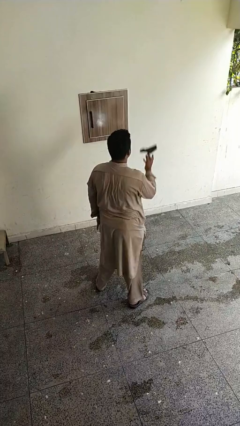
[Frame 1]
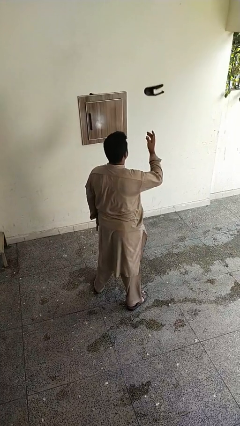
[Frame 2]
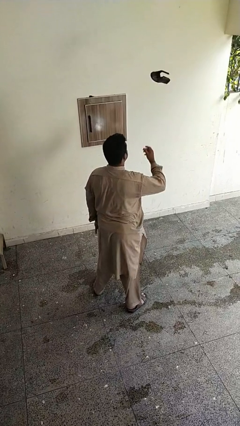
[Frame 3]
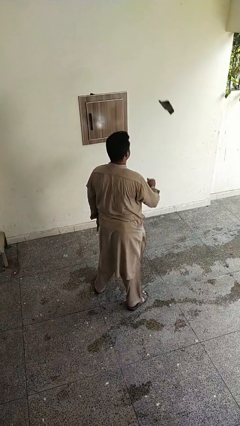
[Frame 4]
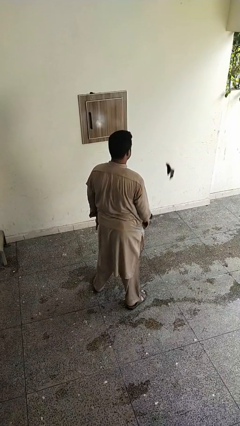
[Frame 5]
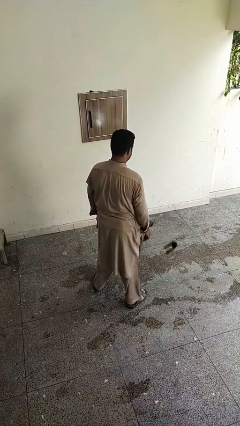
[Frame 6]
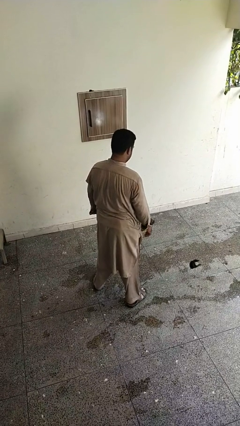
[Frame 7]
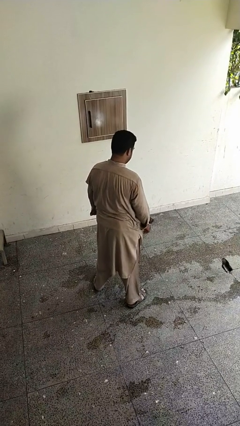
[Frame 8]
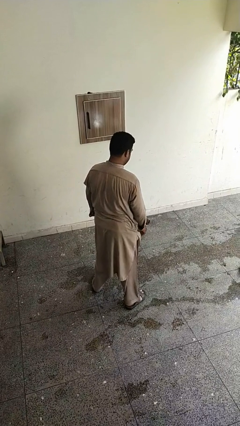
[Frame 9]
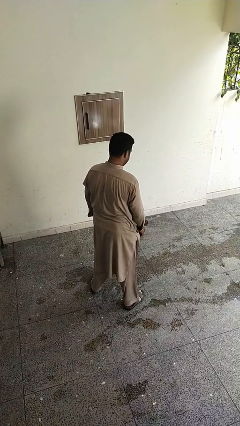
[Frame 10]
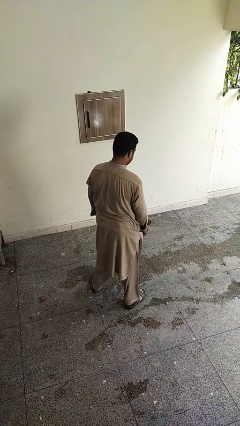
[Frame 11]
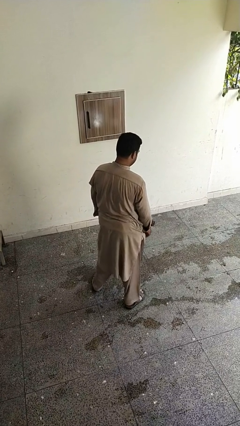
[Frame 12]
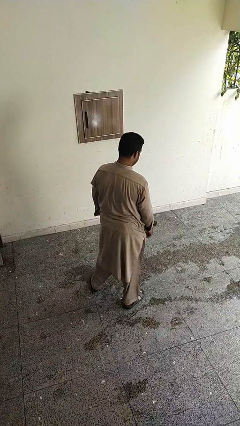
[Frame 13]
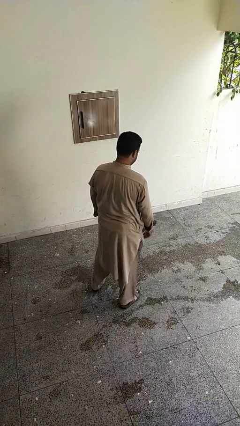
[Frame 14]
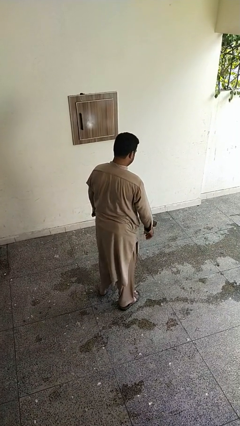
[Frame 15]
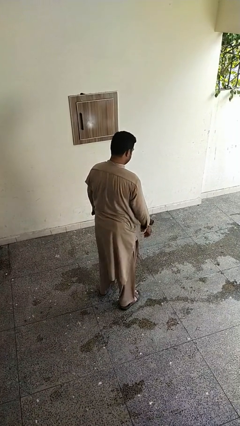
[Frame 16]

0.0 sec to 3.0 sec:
person throws object into air

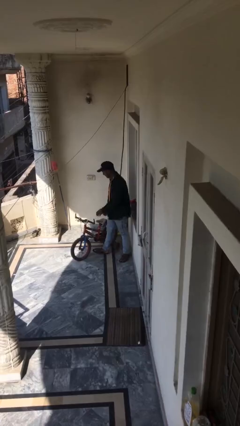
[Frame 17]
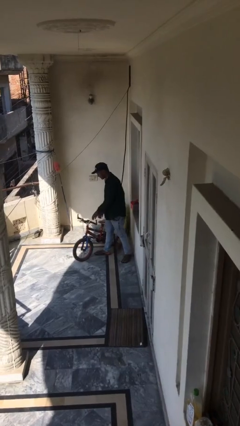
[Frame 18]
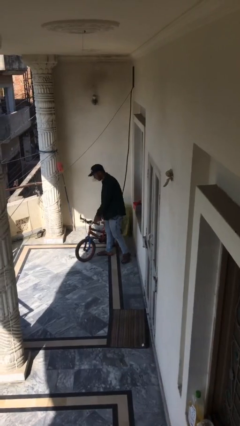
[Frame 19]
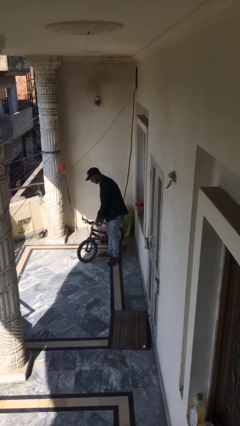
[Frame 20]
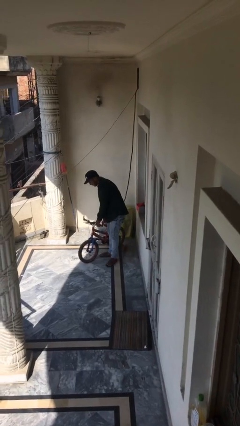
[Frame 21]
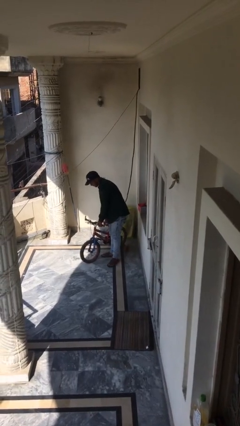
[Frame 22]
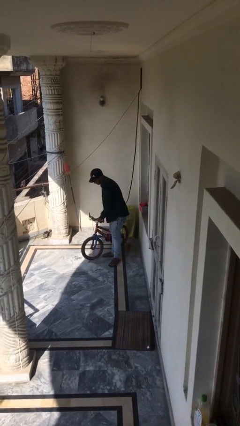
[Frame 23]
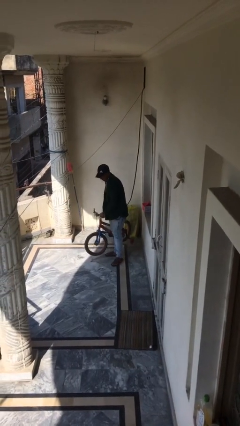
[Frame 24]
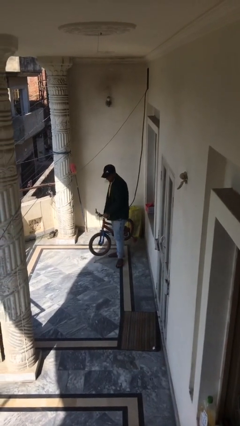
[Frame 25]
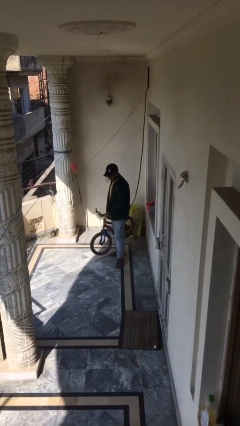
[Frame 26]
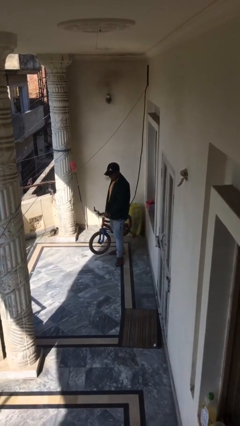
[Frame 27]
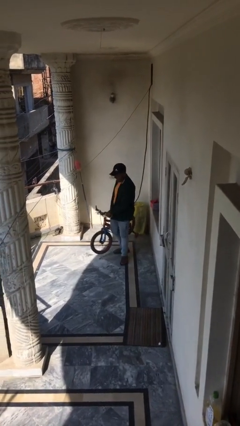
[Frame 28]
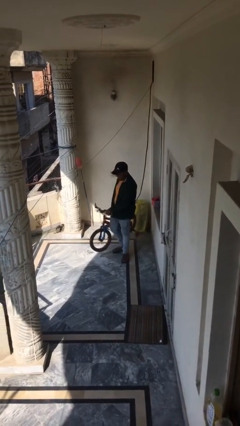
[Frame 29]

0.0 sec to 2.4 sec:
person picks up object from floor

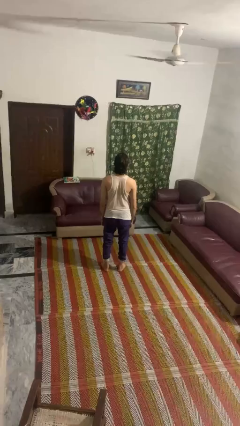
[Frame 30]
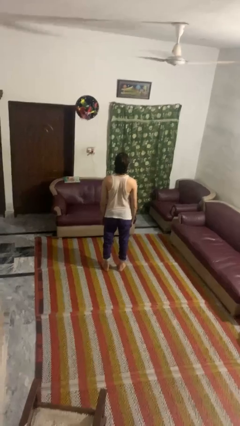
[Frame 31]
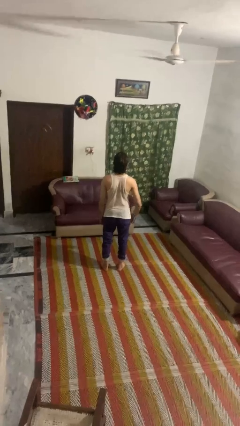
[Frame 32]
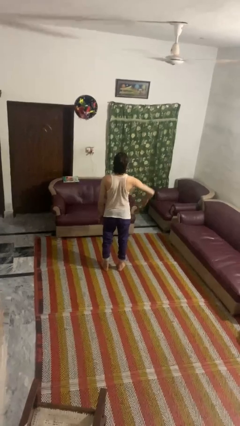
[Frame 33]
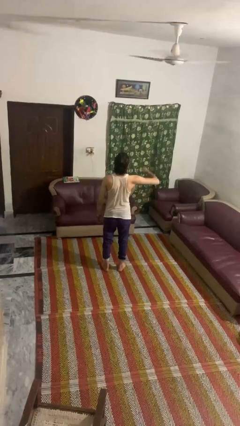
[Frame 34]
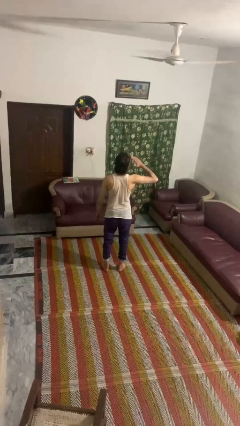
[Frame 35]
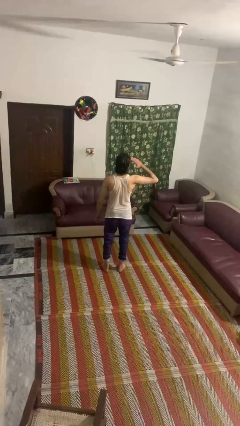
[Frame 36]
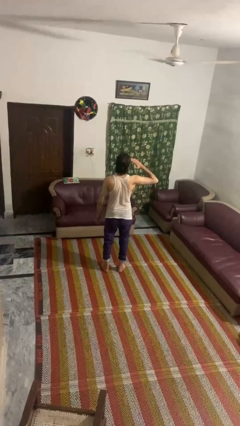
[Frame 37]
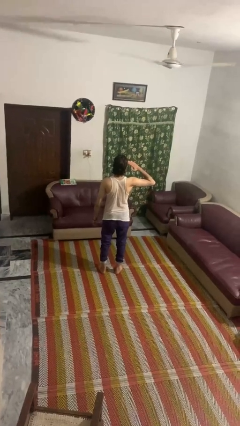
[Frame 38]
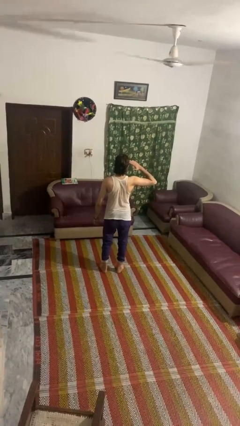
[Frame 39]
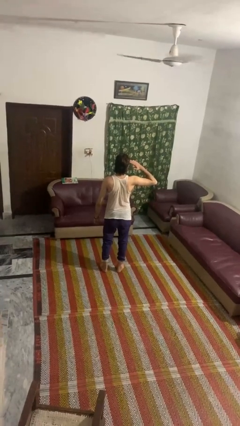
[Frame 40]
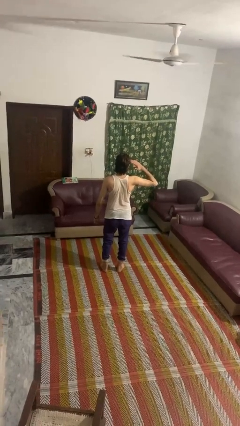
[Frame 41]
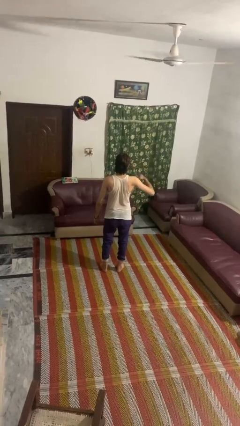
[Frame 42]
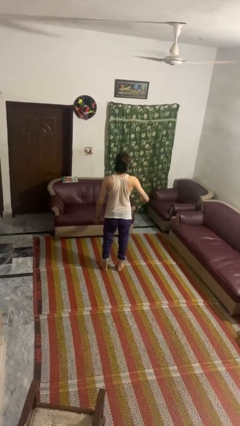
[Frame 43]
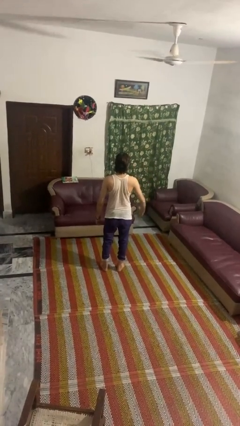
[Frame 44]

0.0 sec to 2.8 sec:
person salutes

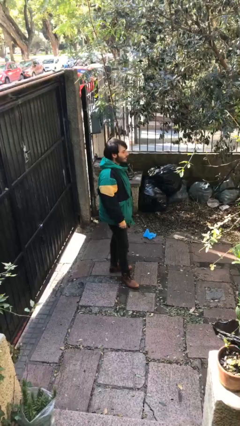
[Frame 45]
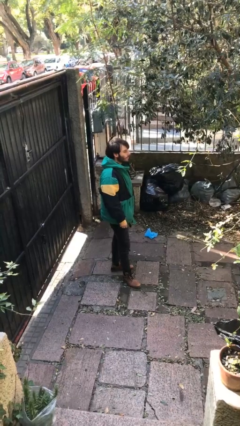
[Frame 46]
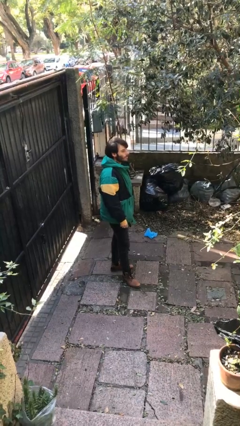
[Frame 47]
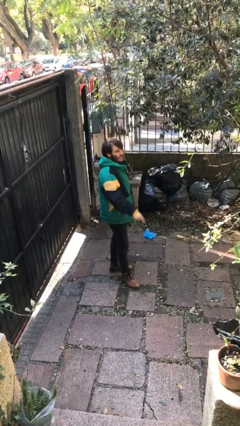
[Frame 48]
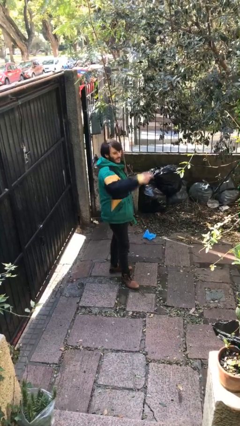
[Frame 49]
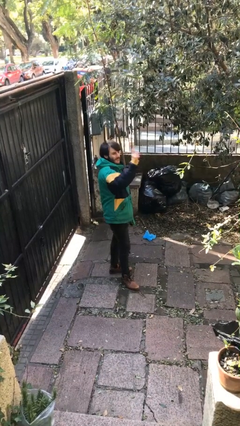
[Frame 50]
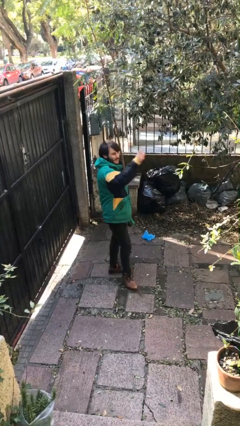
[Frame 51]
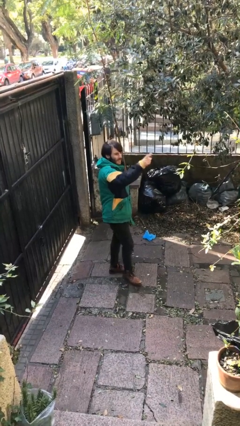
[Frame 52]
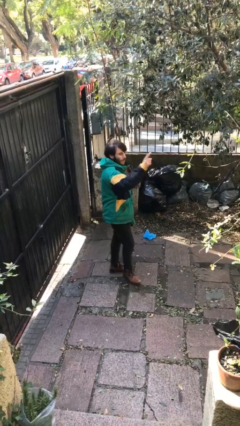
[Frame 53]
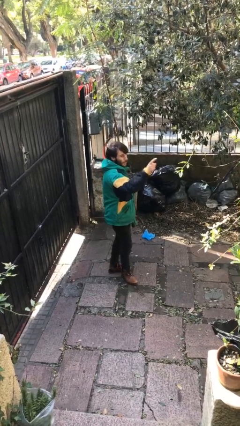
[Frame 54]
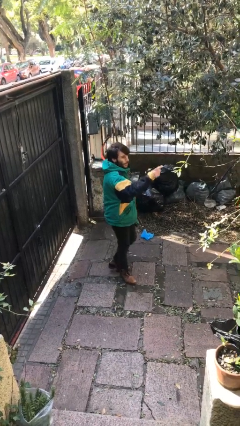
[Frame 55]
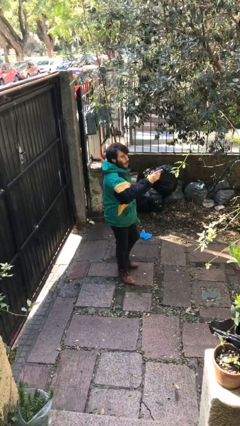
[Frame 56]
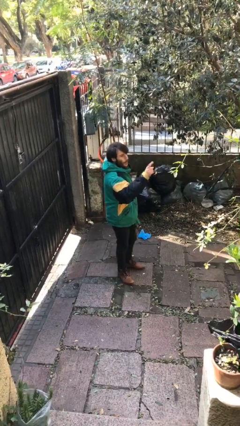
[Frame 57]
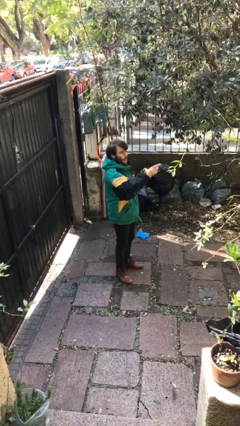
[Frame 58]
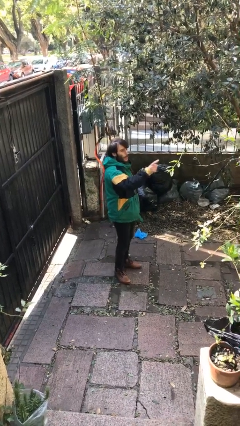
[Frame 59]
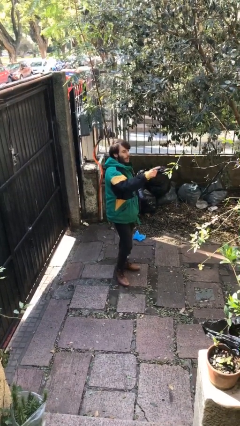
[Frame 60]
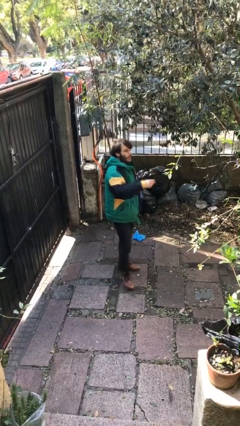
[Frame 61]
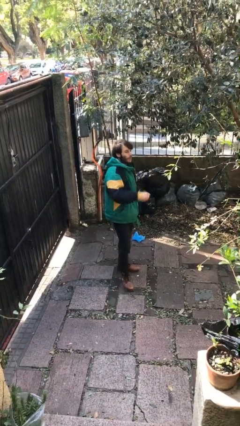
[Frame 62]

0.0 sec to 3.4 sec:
person points at person

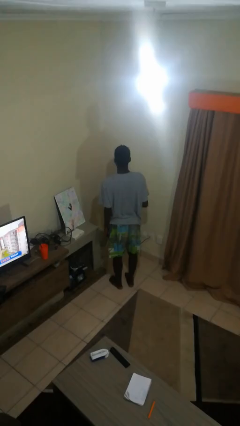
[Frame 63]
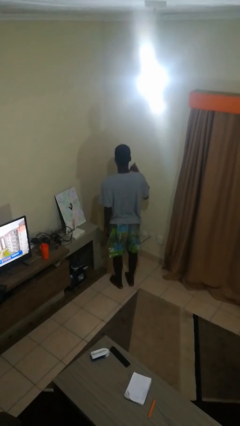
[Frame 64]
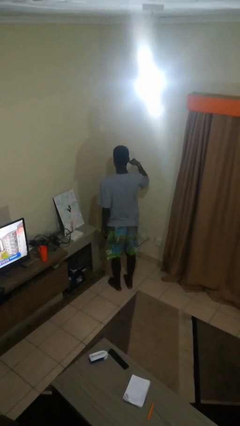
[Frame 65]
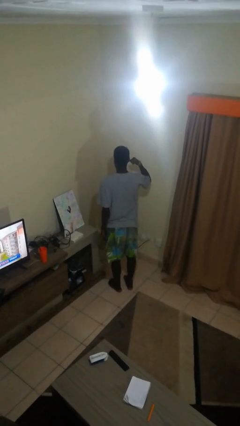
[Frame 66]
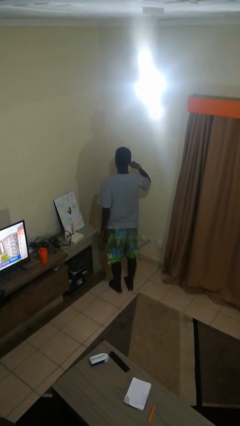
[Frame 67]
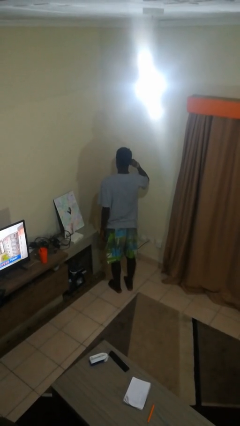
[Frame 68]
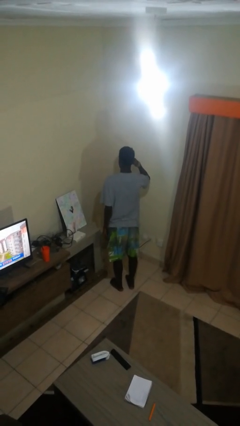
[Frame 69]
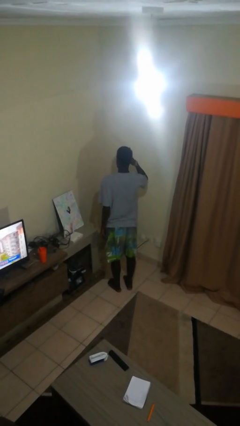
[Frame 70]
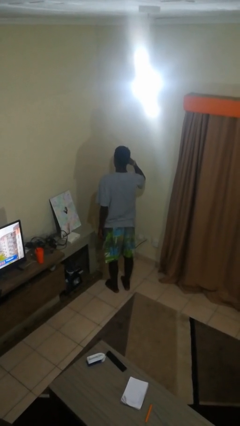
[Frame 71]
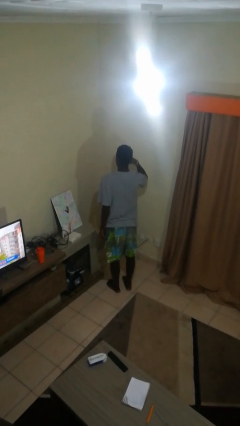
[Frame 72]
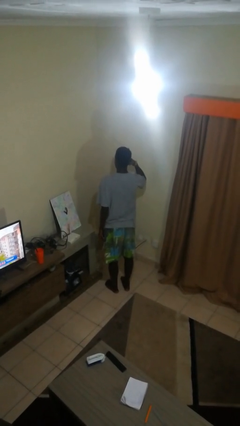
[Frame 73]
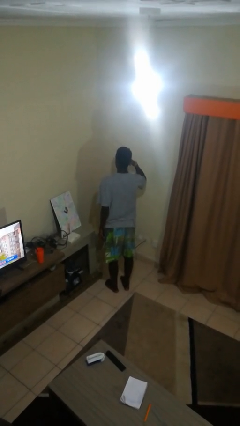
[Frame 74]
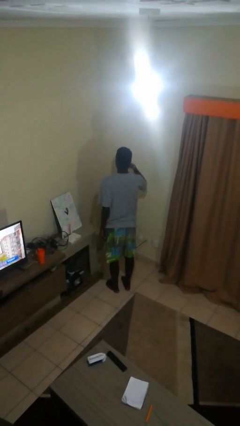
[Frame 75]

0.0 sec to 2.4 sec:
person gestures call me

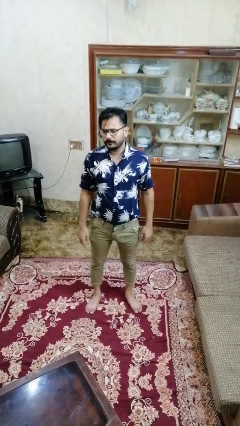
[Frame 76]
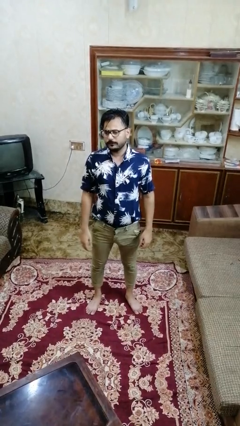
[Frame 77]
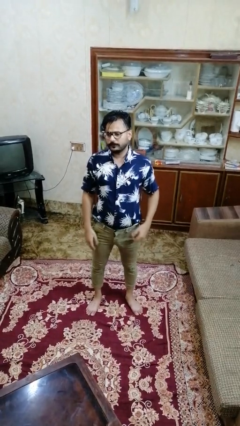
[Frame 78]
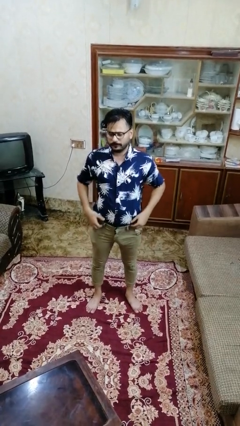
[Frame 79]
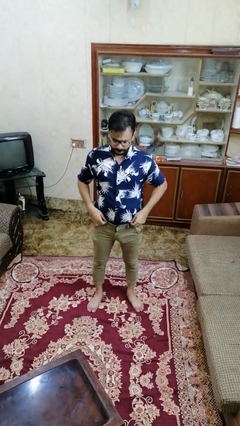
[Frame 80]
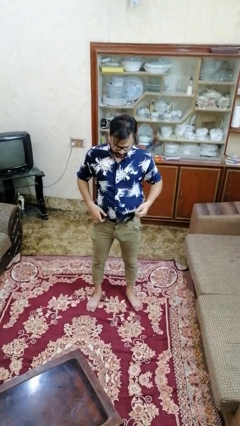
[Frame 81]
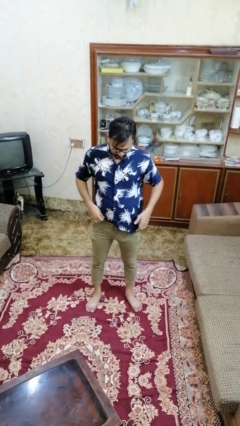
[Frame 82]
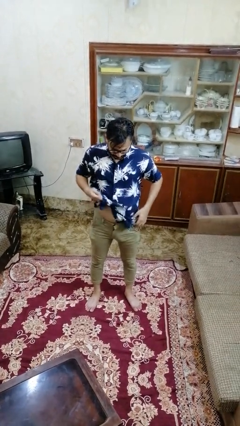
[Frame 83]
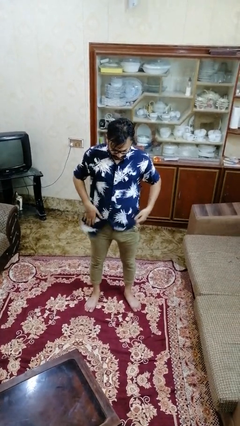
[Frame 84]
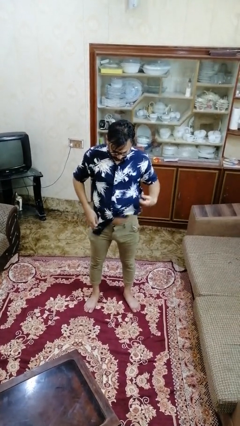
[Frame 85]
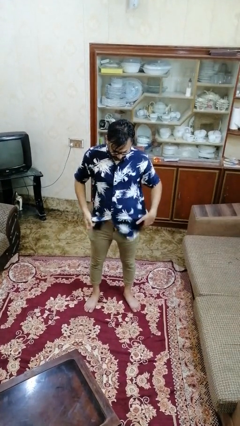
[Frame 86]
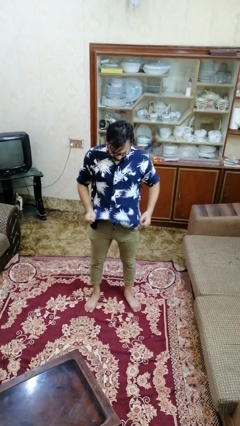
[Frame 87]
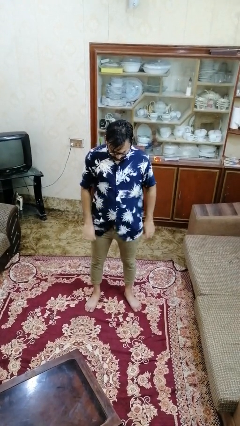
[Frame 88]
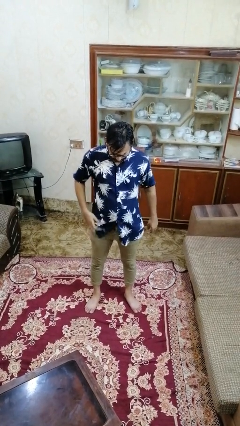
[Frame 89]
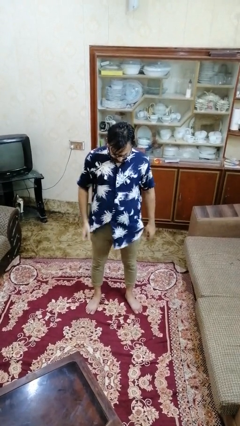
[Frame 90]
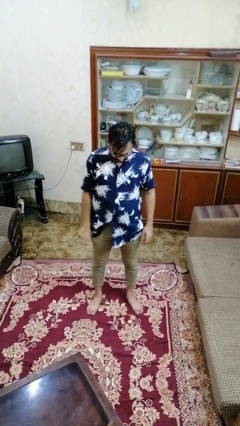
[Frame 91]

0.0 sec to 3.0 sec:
person untucks shirt
